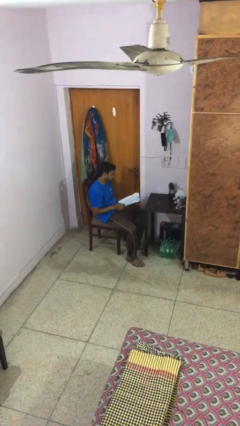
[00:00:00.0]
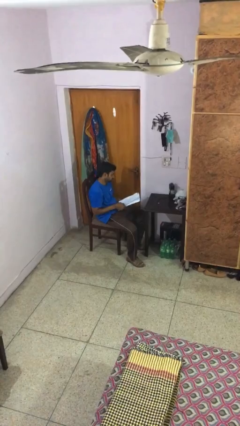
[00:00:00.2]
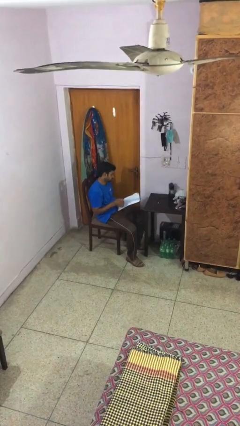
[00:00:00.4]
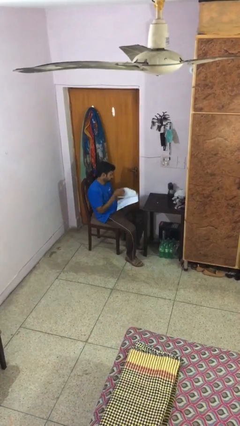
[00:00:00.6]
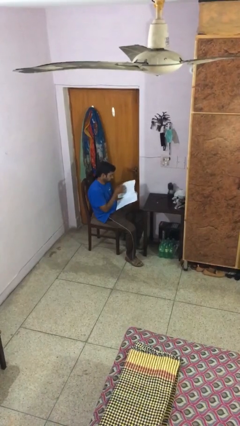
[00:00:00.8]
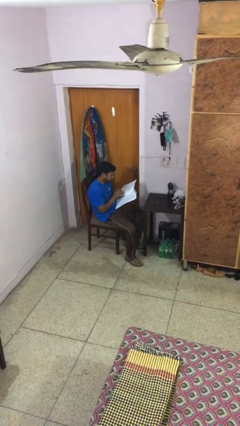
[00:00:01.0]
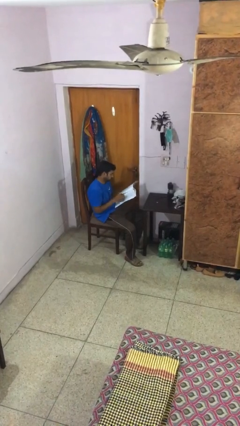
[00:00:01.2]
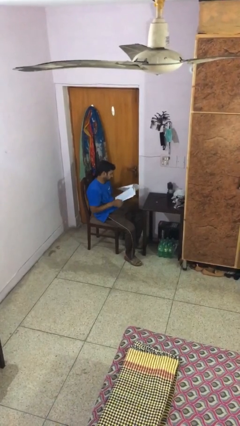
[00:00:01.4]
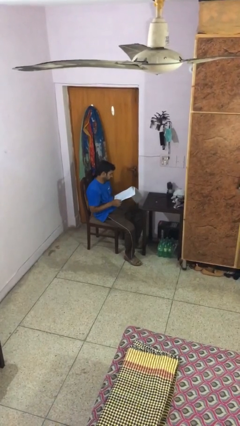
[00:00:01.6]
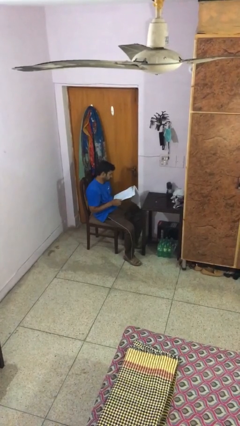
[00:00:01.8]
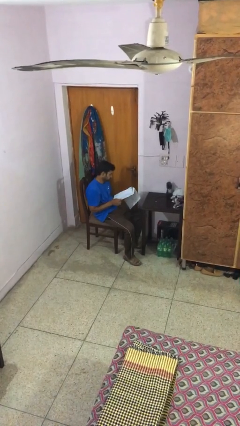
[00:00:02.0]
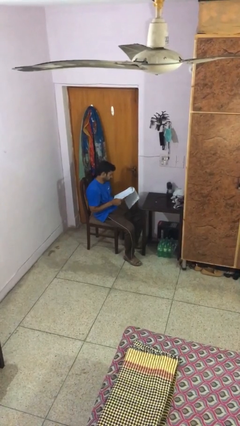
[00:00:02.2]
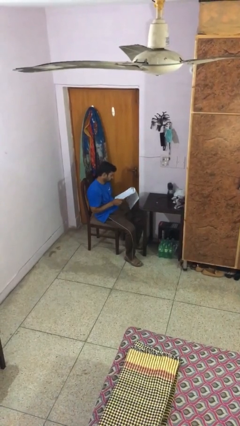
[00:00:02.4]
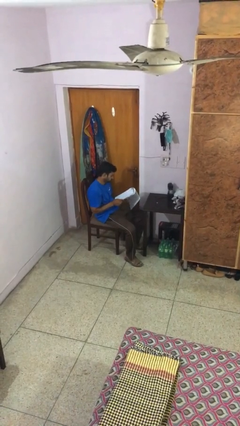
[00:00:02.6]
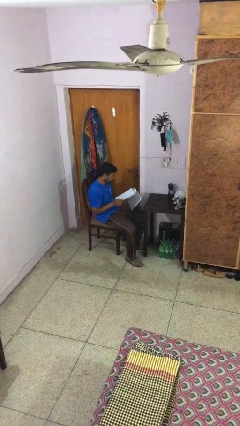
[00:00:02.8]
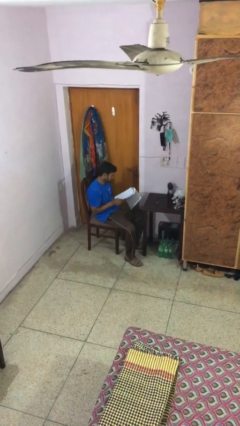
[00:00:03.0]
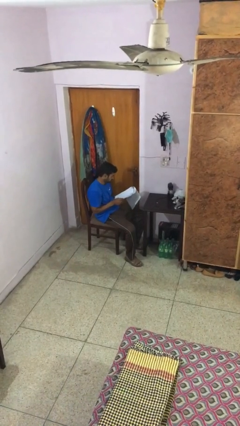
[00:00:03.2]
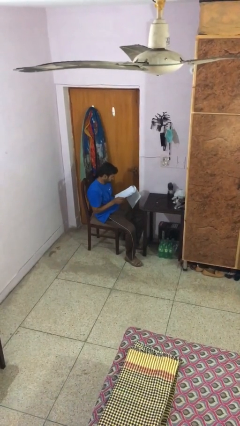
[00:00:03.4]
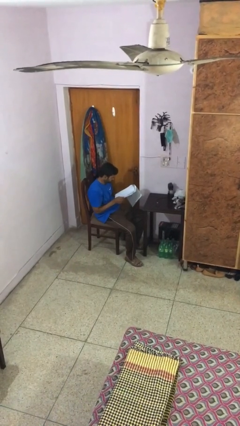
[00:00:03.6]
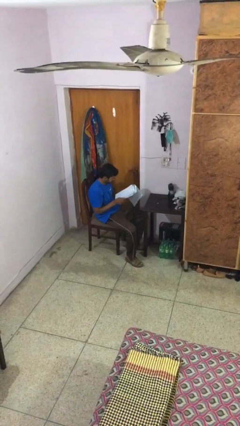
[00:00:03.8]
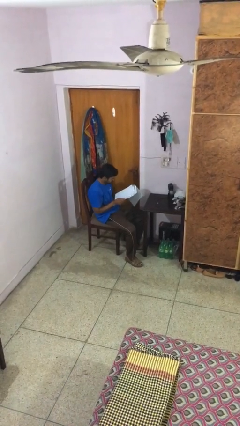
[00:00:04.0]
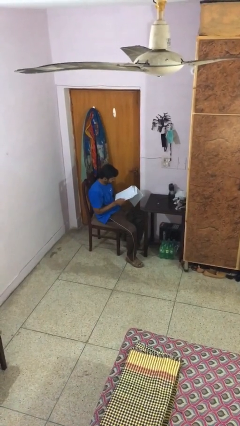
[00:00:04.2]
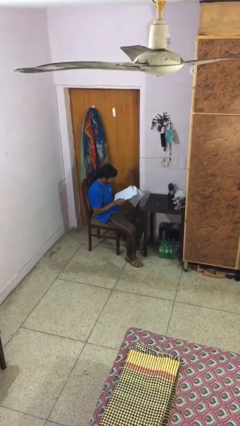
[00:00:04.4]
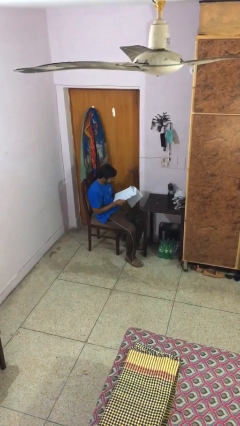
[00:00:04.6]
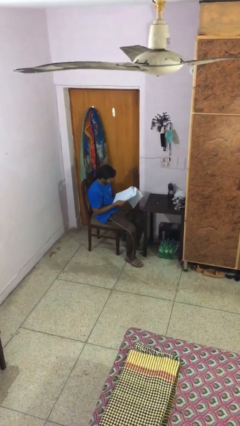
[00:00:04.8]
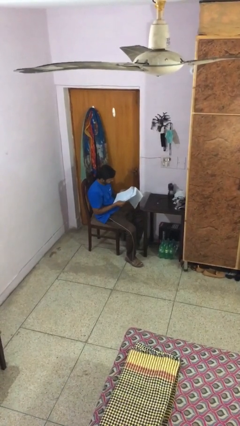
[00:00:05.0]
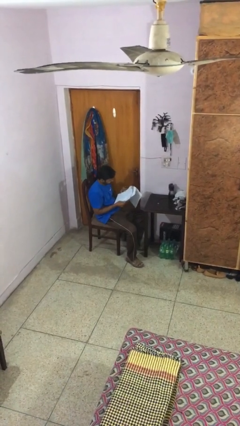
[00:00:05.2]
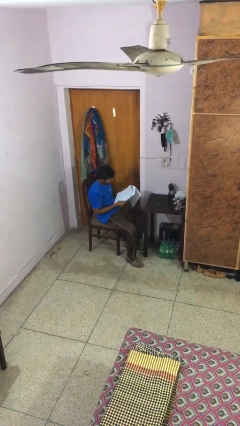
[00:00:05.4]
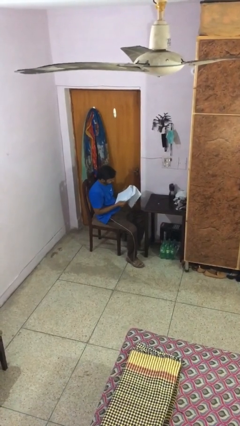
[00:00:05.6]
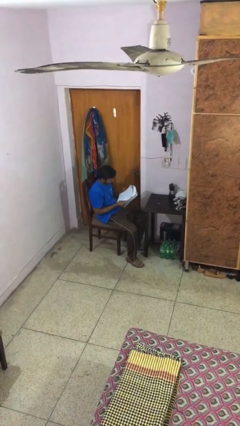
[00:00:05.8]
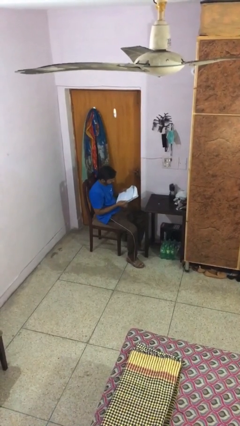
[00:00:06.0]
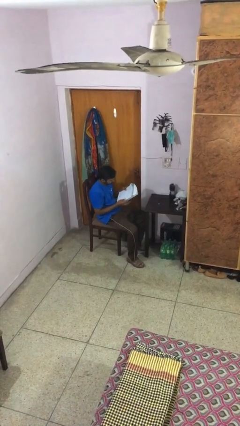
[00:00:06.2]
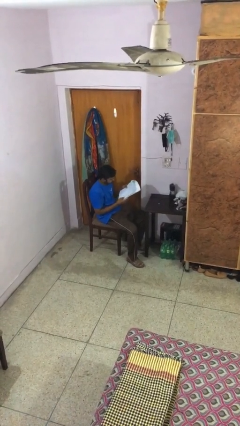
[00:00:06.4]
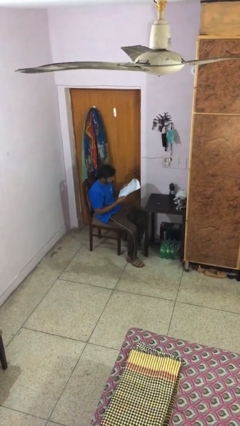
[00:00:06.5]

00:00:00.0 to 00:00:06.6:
person reads document

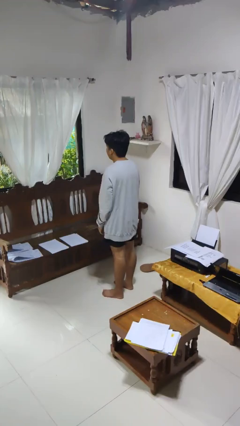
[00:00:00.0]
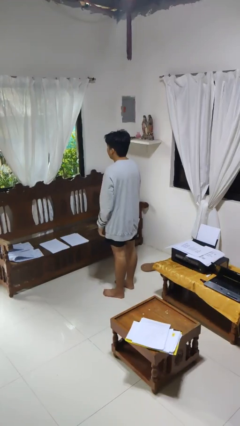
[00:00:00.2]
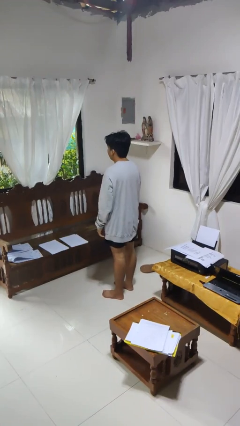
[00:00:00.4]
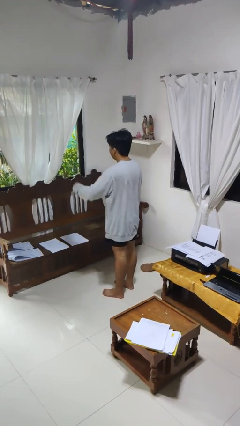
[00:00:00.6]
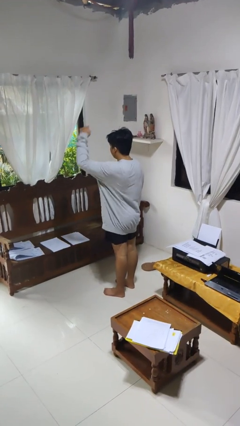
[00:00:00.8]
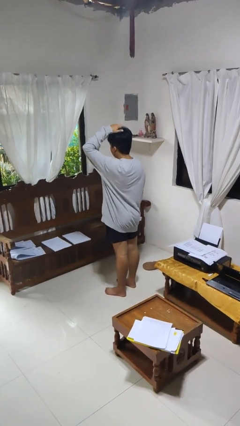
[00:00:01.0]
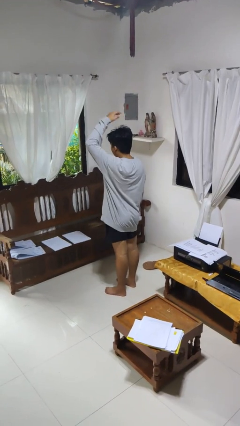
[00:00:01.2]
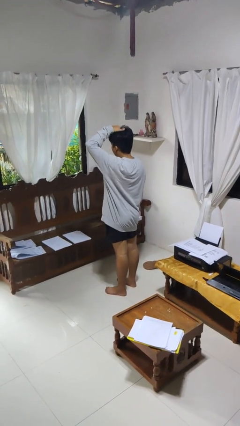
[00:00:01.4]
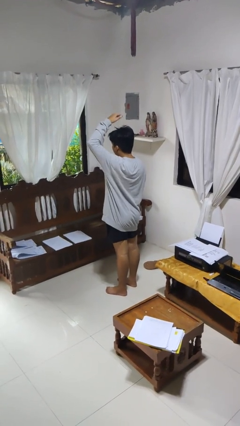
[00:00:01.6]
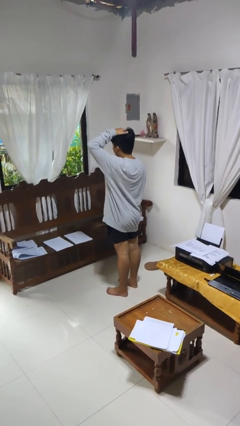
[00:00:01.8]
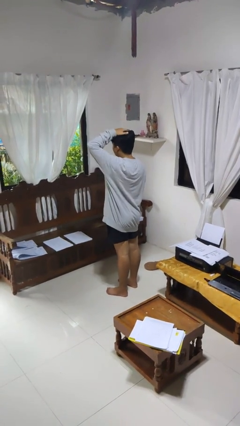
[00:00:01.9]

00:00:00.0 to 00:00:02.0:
person pats head

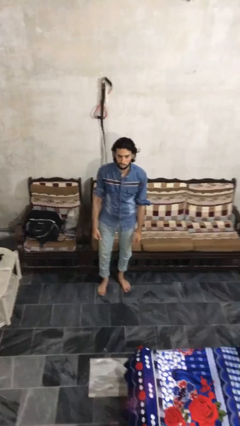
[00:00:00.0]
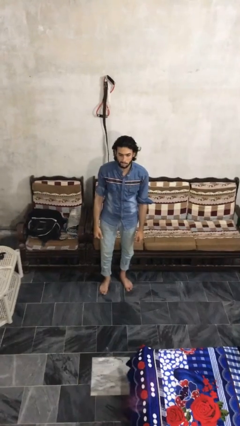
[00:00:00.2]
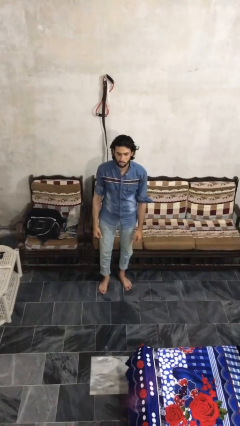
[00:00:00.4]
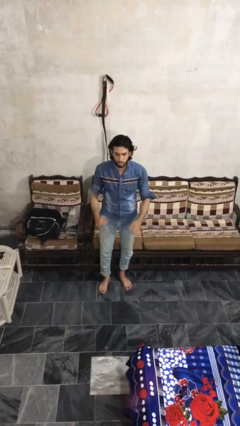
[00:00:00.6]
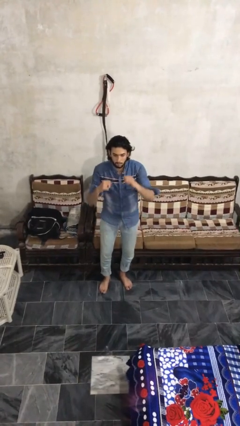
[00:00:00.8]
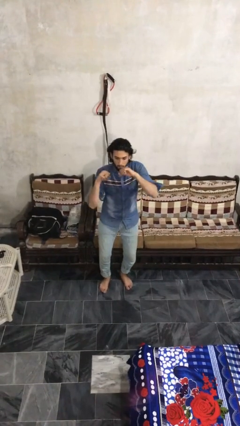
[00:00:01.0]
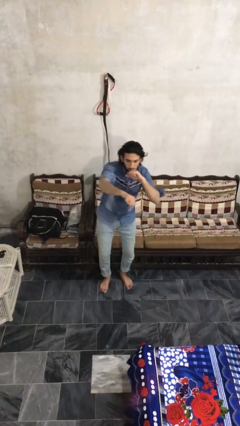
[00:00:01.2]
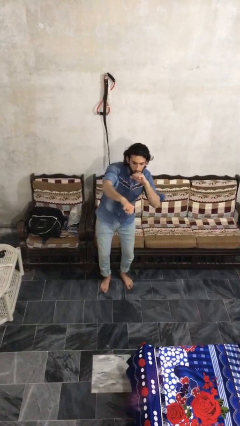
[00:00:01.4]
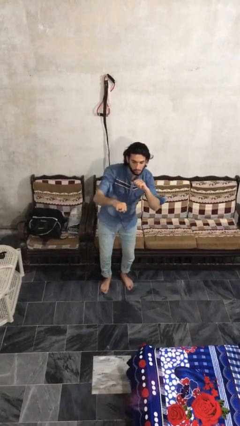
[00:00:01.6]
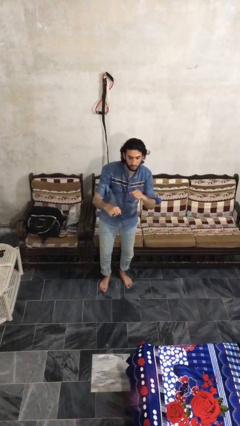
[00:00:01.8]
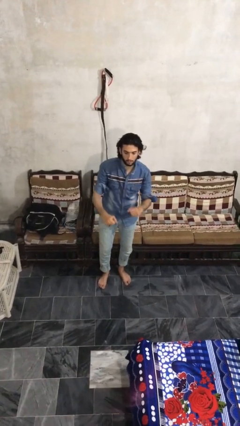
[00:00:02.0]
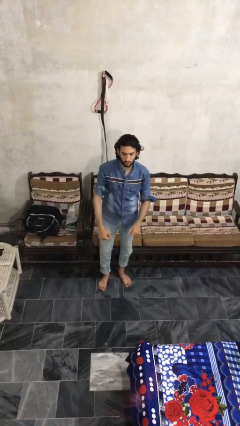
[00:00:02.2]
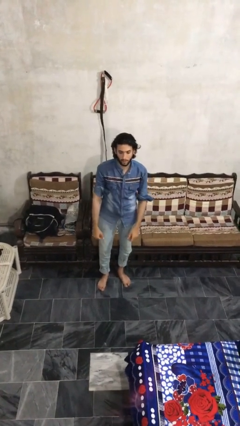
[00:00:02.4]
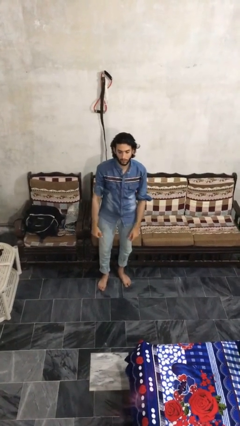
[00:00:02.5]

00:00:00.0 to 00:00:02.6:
person punches

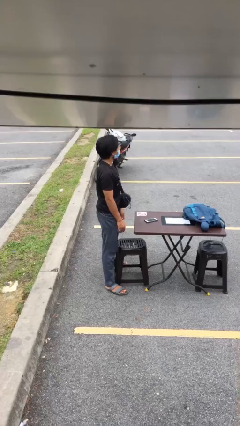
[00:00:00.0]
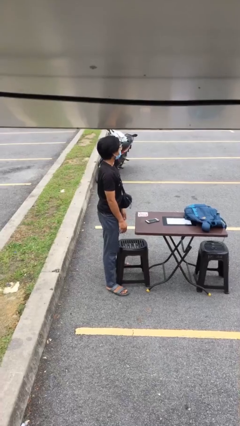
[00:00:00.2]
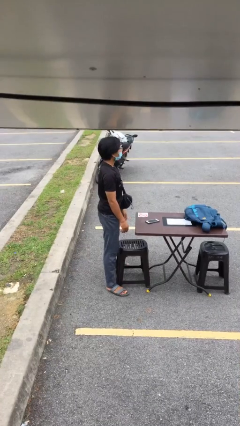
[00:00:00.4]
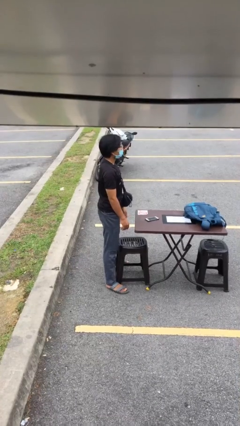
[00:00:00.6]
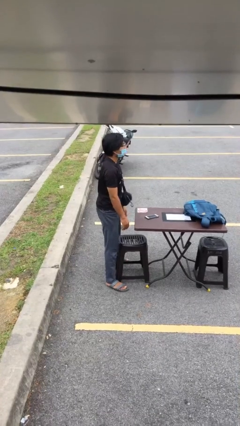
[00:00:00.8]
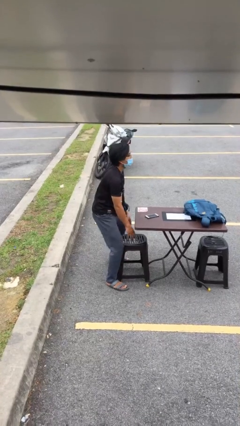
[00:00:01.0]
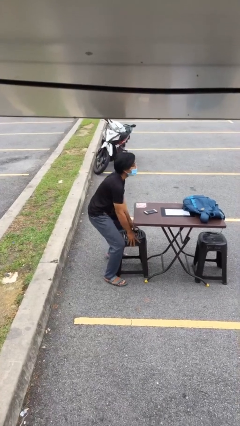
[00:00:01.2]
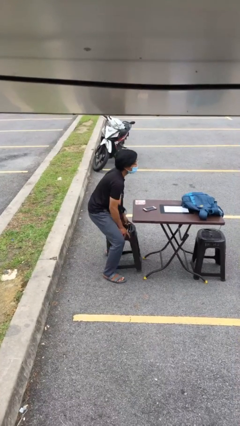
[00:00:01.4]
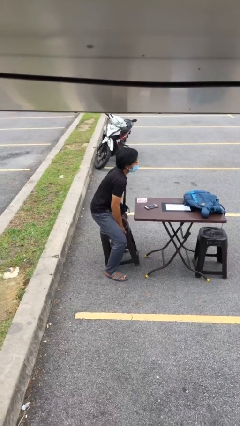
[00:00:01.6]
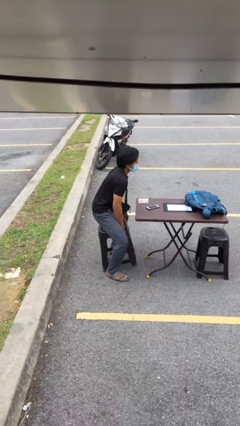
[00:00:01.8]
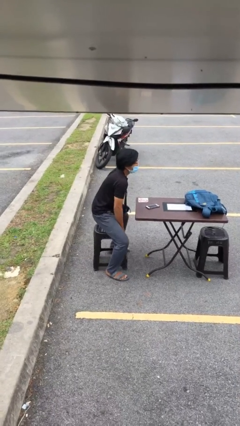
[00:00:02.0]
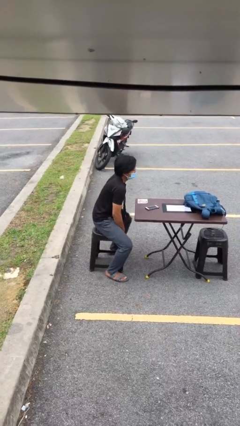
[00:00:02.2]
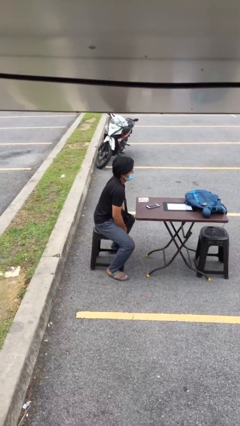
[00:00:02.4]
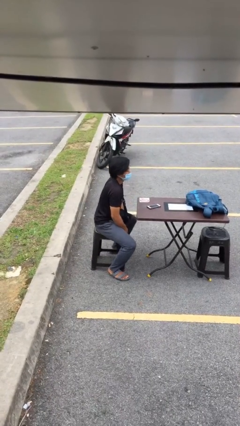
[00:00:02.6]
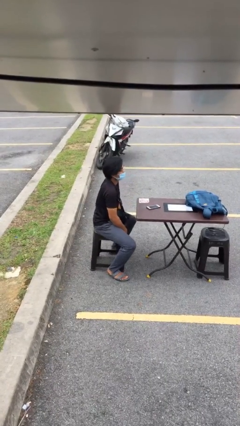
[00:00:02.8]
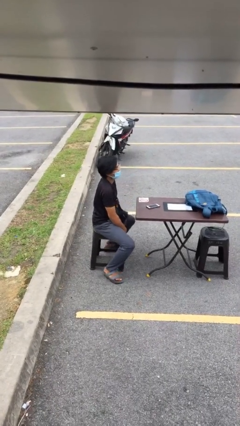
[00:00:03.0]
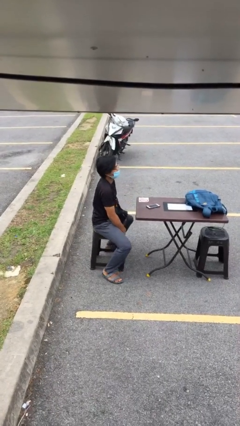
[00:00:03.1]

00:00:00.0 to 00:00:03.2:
person sits down

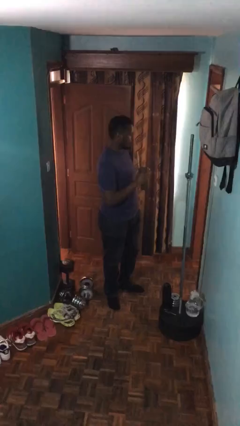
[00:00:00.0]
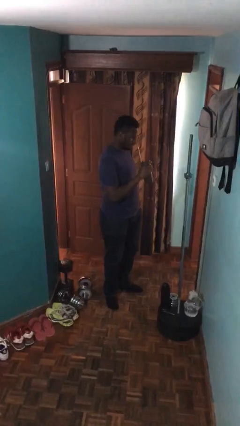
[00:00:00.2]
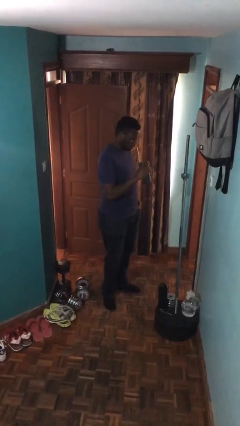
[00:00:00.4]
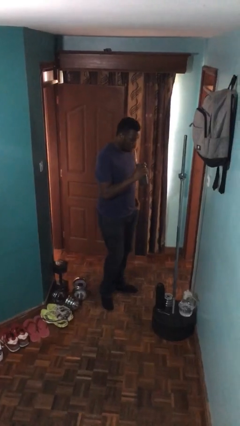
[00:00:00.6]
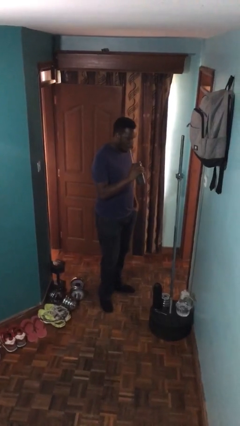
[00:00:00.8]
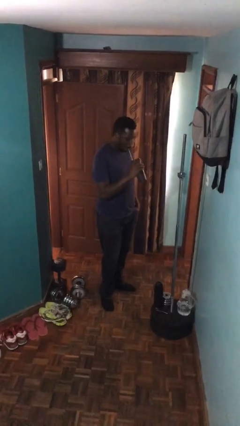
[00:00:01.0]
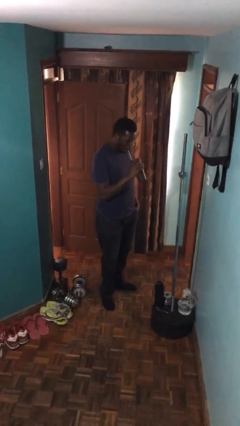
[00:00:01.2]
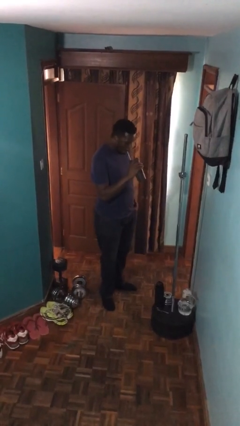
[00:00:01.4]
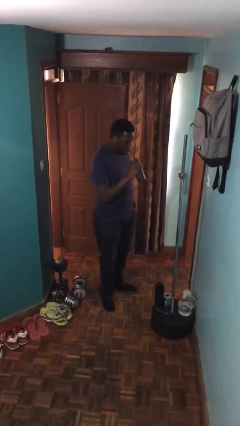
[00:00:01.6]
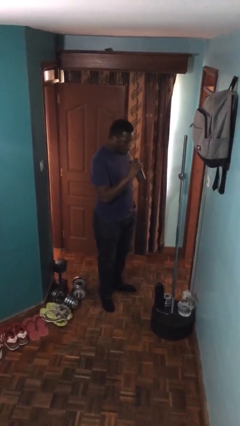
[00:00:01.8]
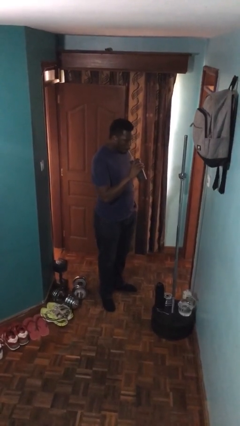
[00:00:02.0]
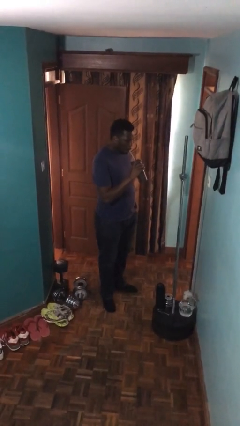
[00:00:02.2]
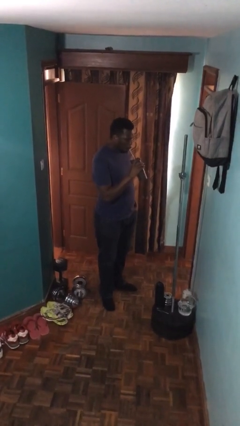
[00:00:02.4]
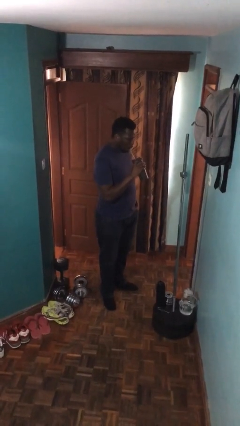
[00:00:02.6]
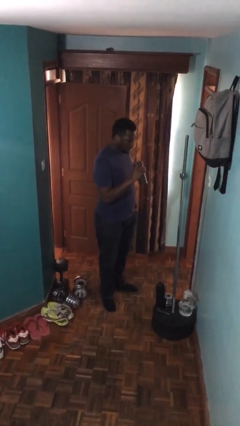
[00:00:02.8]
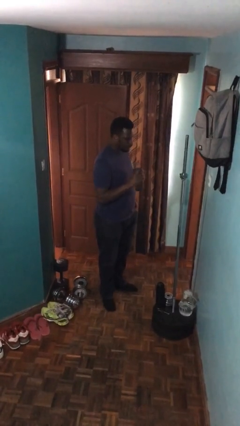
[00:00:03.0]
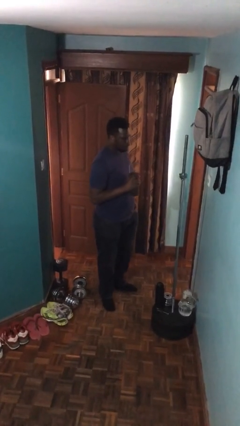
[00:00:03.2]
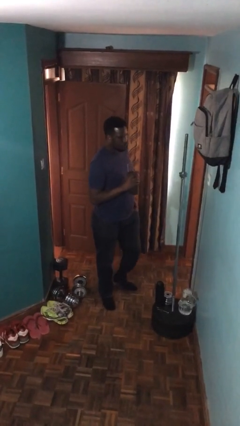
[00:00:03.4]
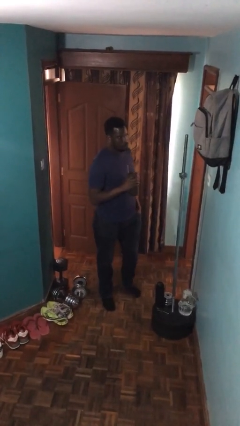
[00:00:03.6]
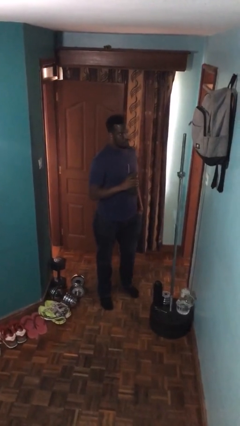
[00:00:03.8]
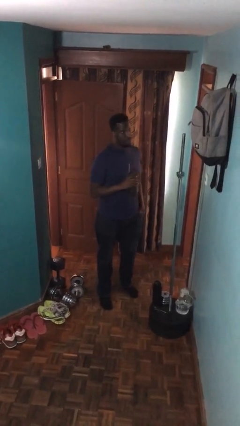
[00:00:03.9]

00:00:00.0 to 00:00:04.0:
person drinks from straw
